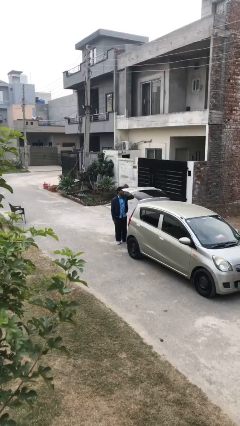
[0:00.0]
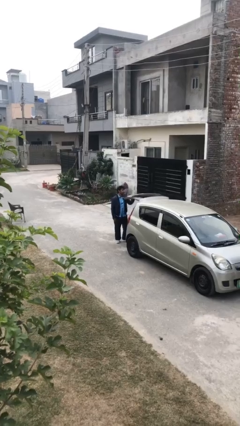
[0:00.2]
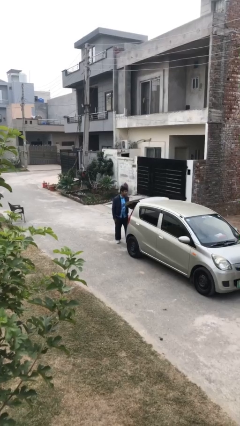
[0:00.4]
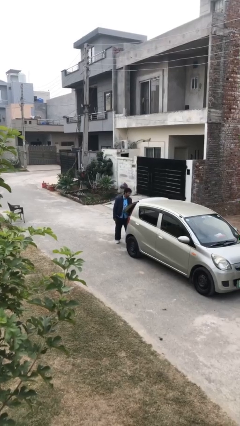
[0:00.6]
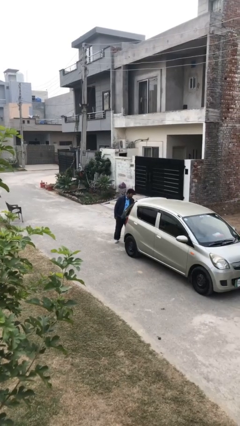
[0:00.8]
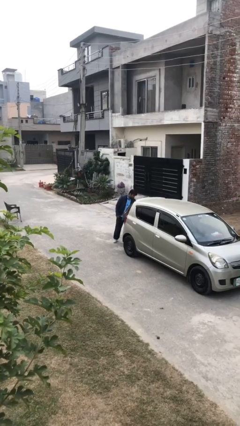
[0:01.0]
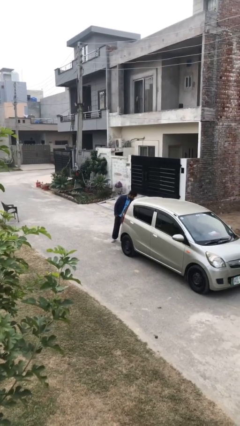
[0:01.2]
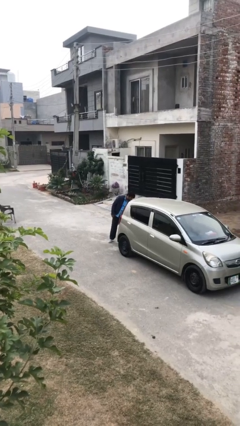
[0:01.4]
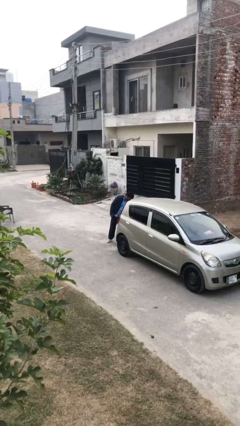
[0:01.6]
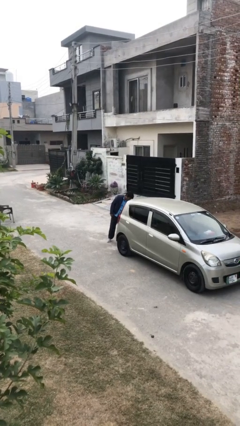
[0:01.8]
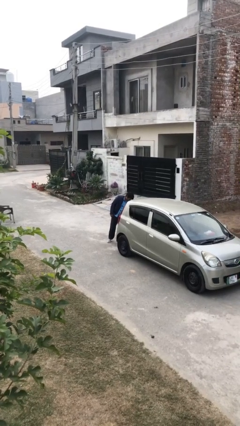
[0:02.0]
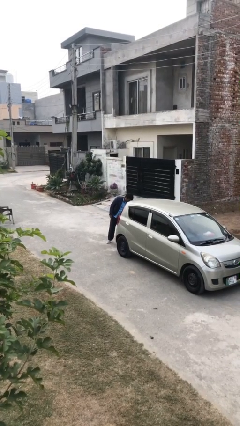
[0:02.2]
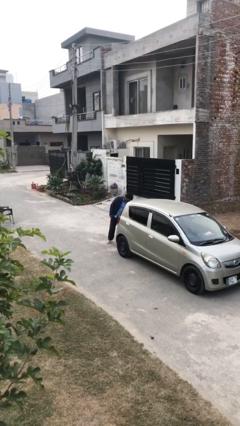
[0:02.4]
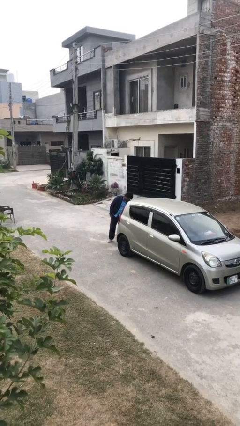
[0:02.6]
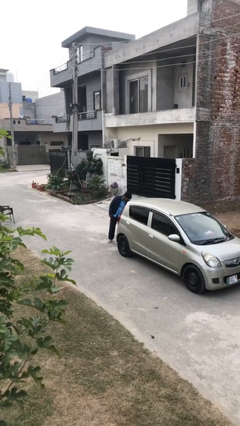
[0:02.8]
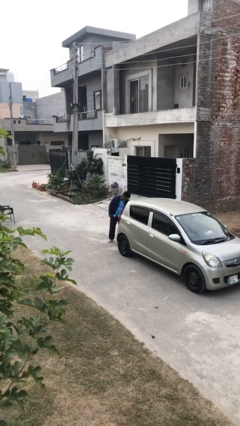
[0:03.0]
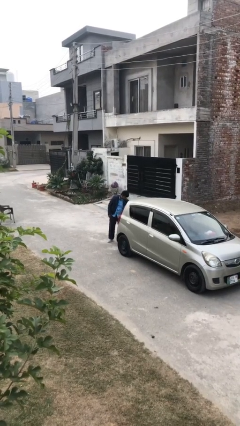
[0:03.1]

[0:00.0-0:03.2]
person closes car trunk

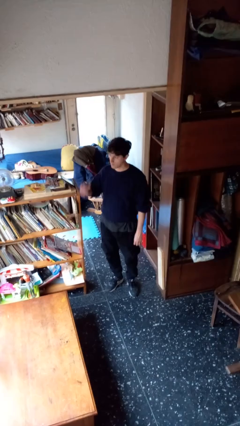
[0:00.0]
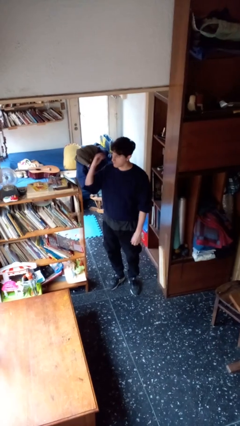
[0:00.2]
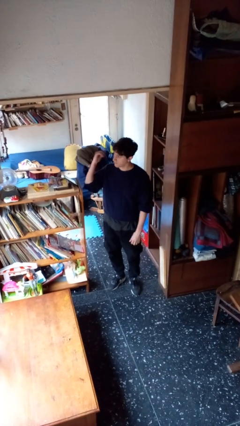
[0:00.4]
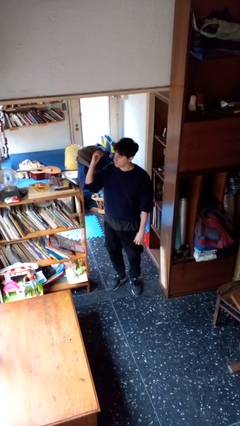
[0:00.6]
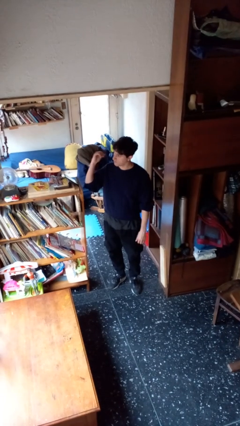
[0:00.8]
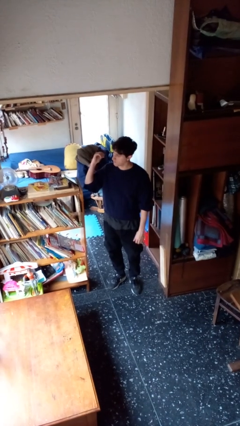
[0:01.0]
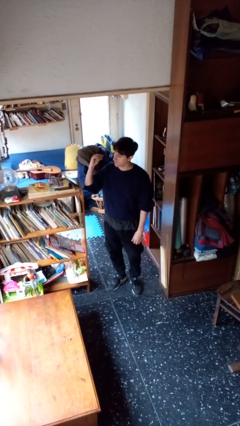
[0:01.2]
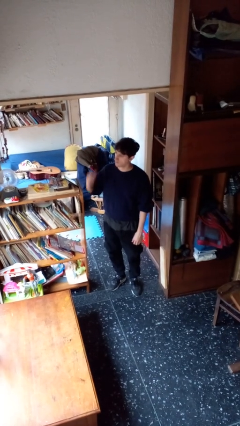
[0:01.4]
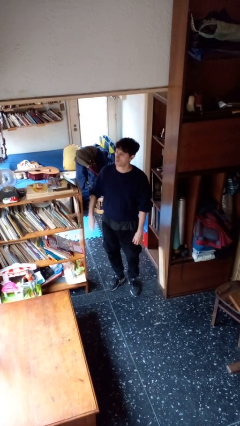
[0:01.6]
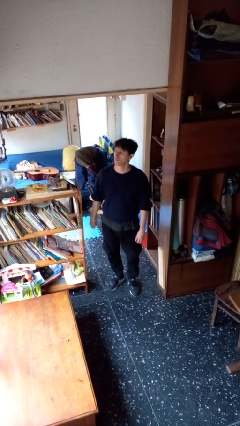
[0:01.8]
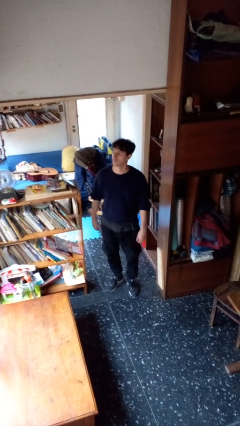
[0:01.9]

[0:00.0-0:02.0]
person gestures behind me

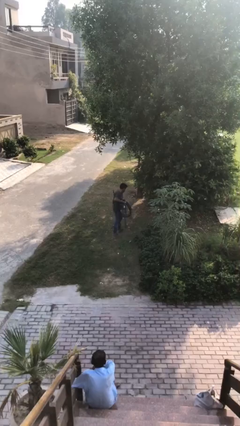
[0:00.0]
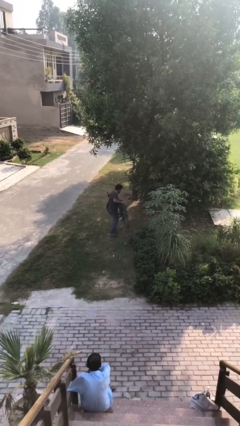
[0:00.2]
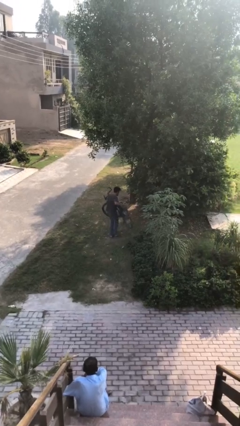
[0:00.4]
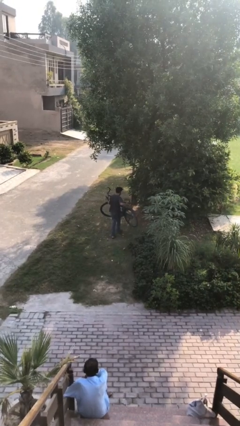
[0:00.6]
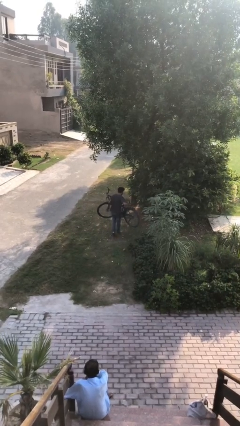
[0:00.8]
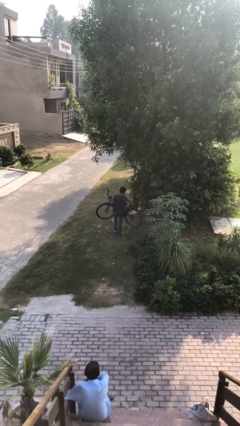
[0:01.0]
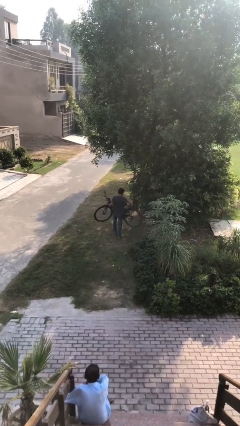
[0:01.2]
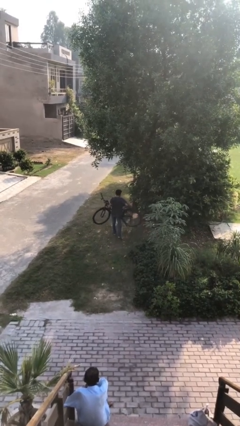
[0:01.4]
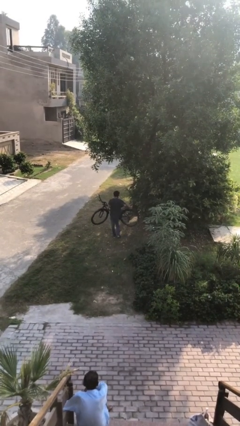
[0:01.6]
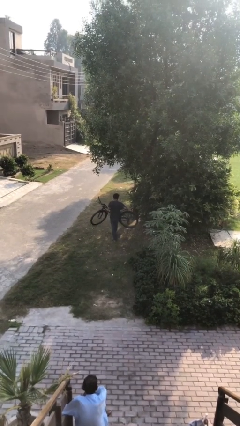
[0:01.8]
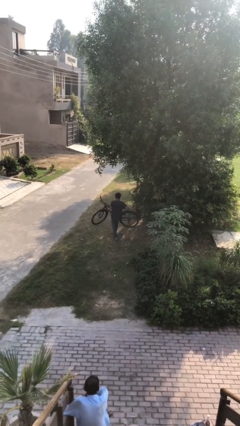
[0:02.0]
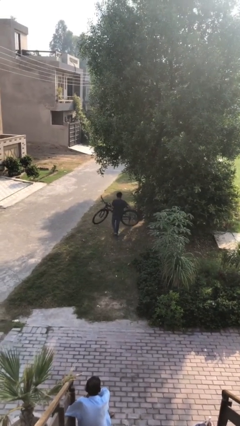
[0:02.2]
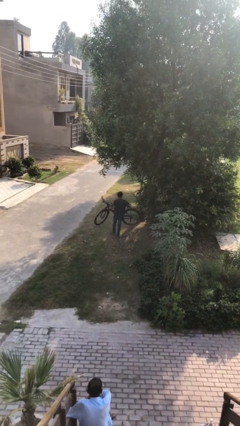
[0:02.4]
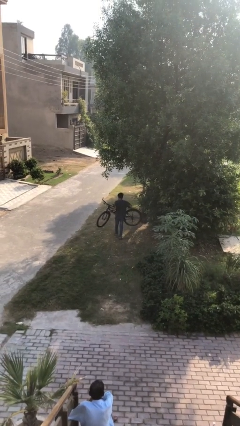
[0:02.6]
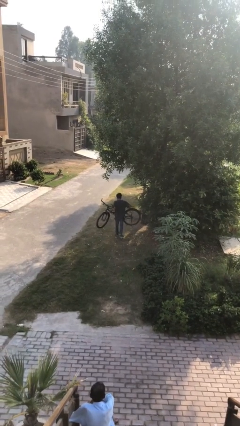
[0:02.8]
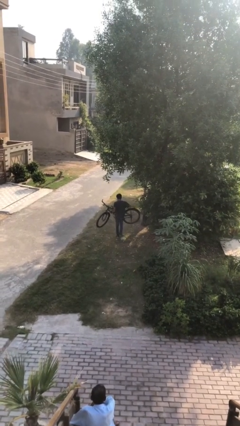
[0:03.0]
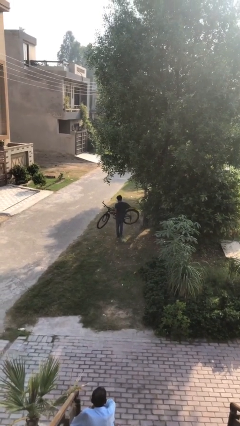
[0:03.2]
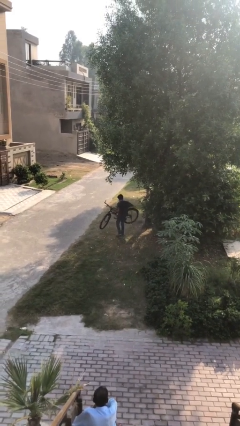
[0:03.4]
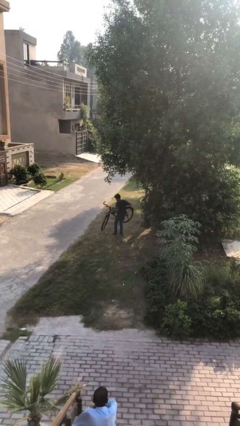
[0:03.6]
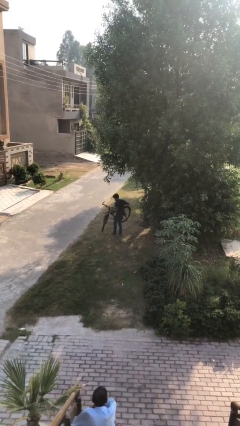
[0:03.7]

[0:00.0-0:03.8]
person carries heavy object

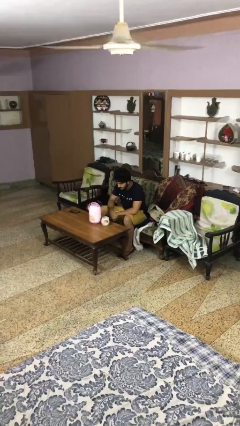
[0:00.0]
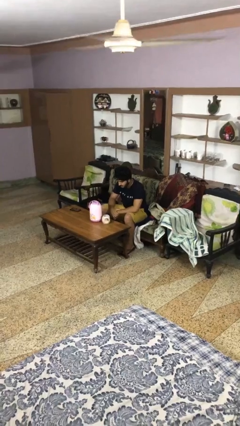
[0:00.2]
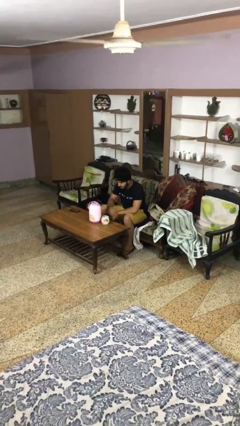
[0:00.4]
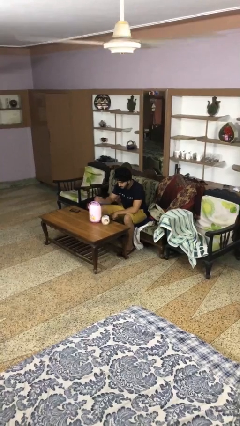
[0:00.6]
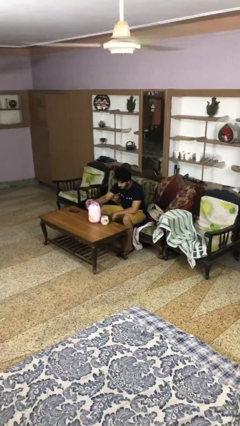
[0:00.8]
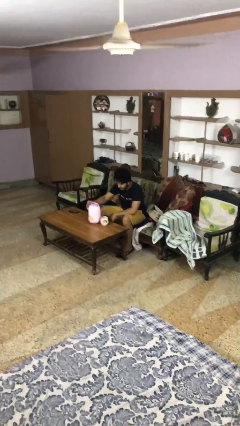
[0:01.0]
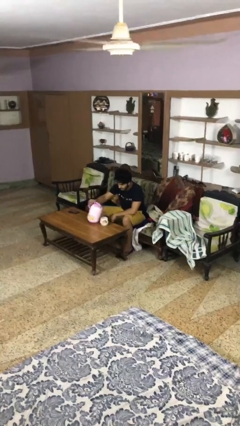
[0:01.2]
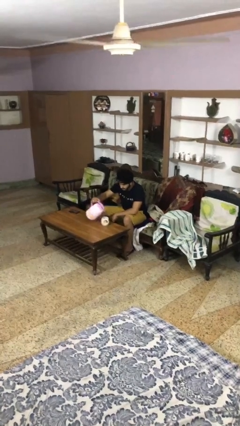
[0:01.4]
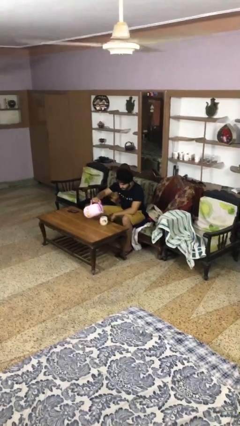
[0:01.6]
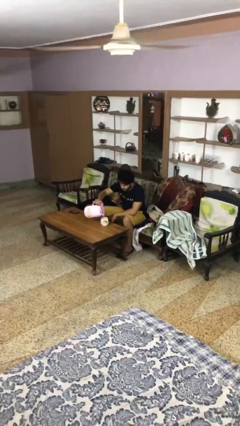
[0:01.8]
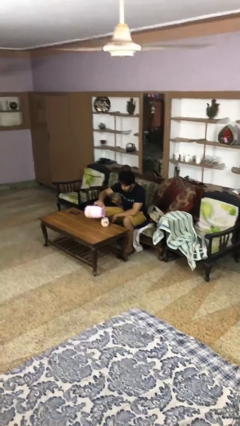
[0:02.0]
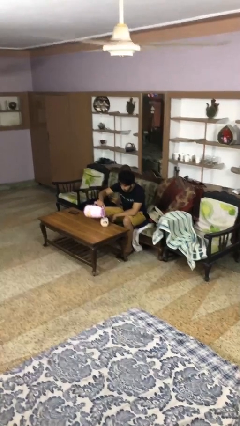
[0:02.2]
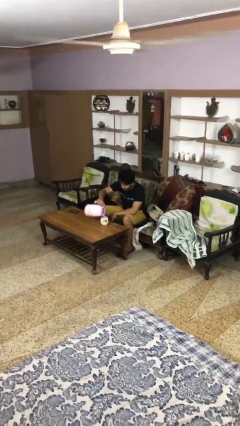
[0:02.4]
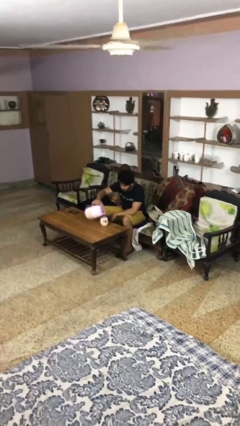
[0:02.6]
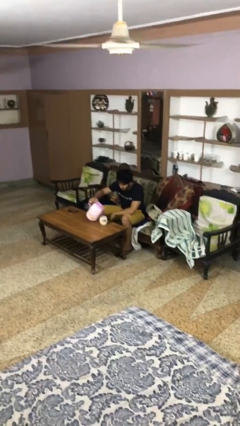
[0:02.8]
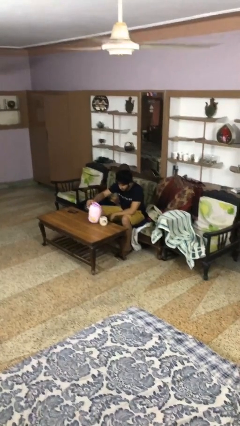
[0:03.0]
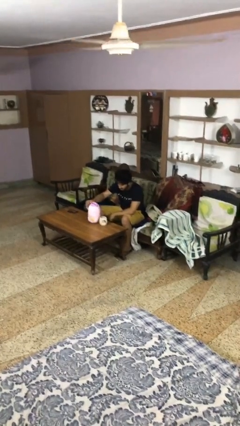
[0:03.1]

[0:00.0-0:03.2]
person pours coffee into mug

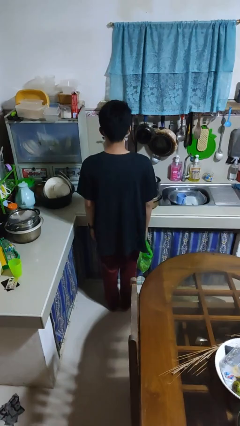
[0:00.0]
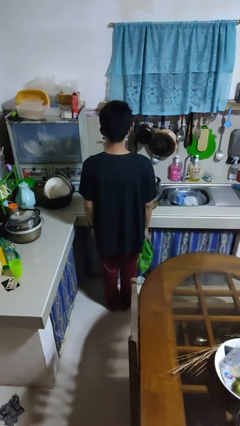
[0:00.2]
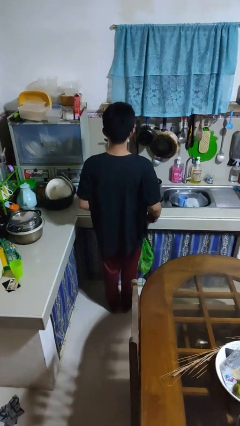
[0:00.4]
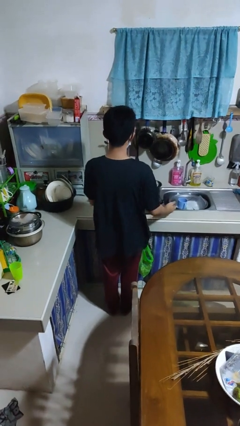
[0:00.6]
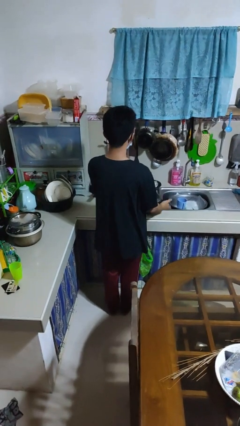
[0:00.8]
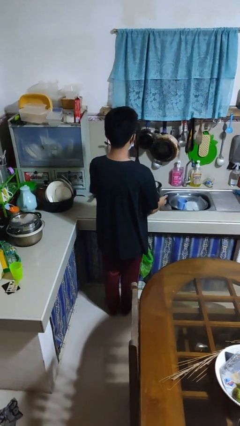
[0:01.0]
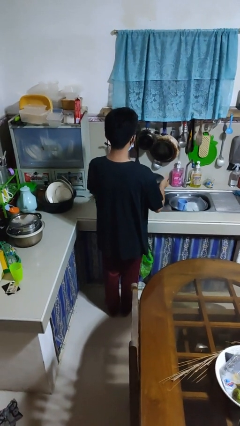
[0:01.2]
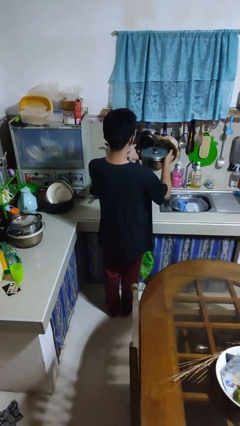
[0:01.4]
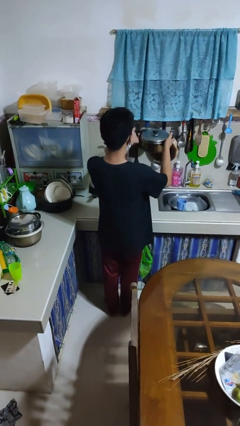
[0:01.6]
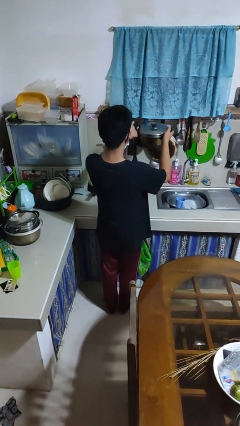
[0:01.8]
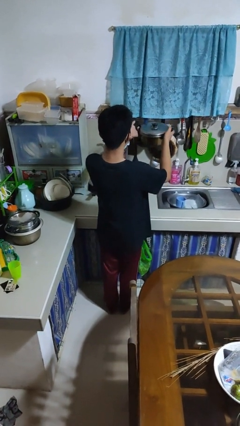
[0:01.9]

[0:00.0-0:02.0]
person picks up object from countertop

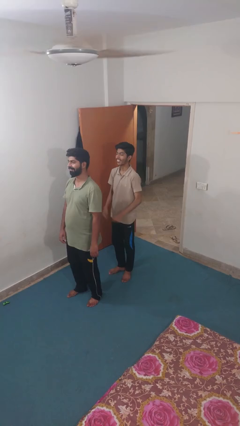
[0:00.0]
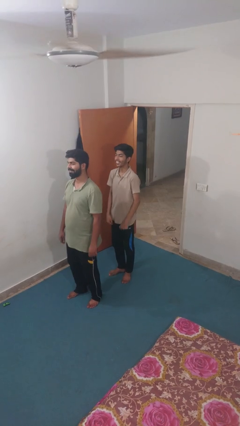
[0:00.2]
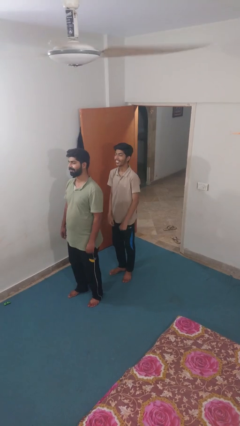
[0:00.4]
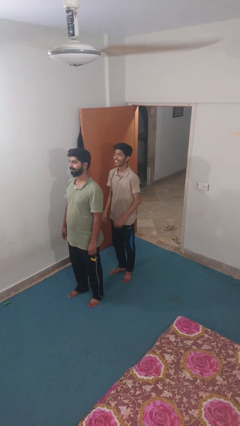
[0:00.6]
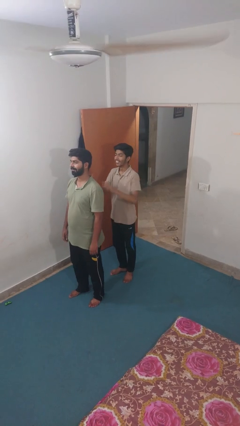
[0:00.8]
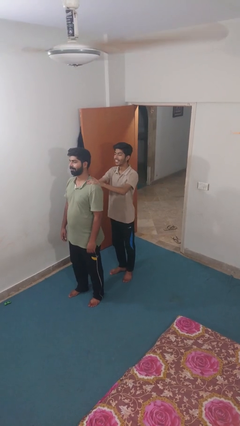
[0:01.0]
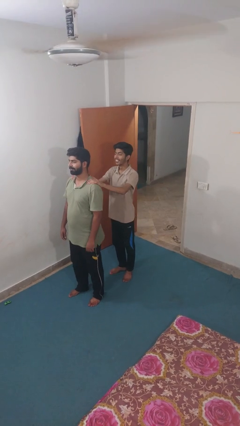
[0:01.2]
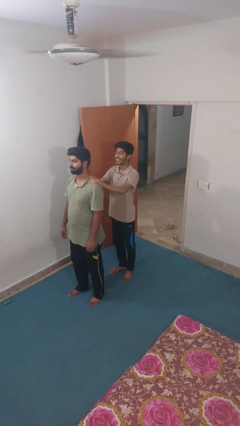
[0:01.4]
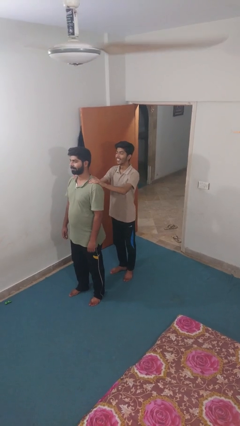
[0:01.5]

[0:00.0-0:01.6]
person grabs person by shoulder

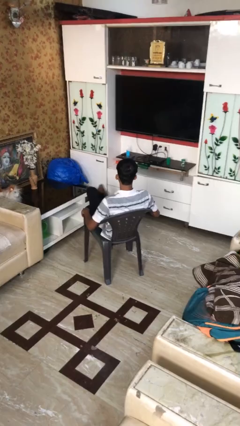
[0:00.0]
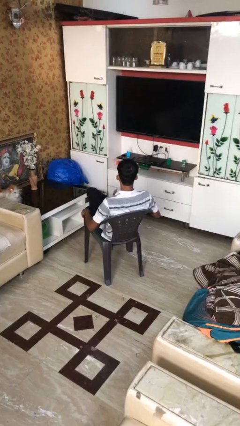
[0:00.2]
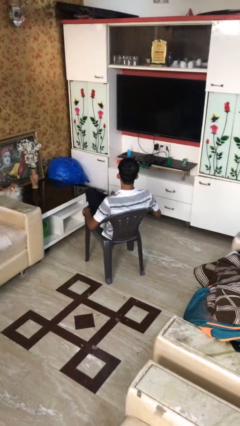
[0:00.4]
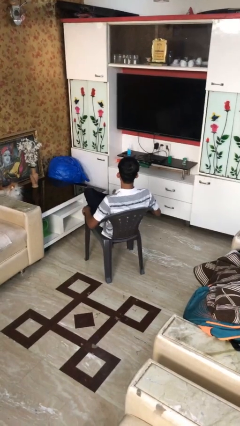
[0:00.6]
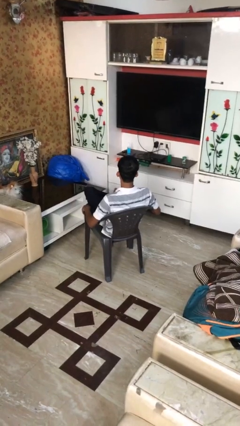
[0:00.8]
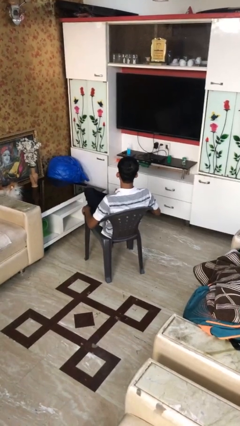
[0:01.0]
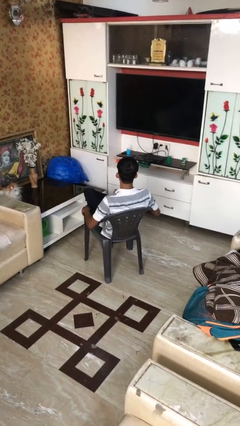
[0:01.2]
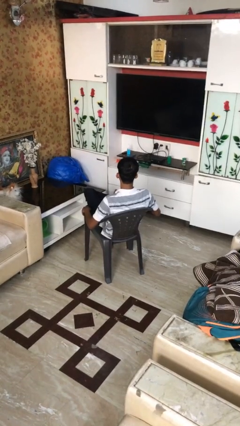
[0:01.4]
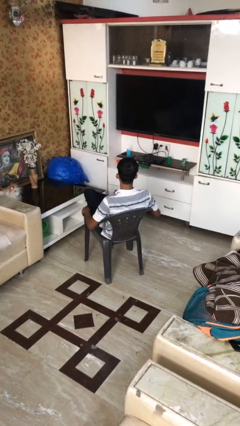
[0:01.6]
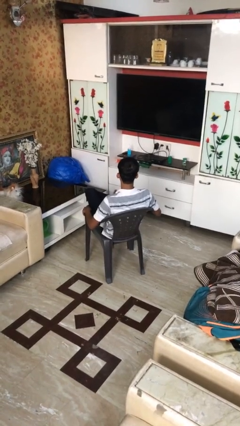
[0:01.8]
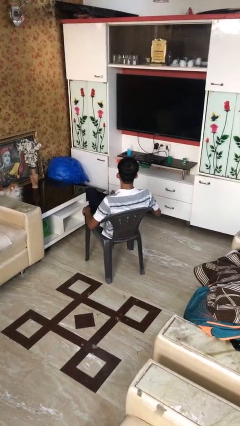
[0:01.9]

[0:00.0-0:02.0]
person crosses legs
